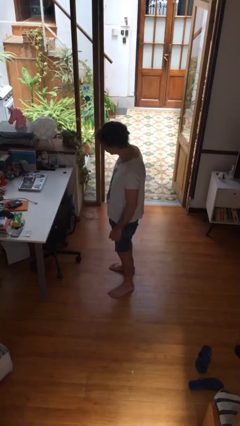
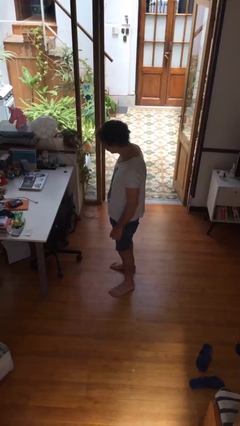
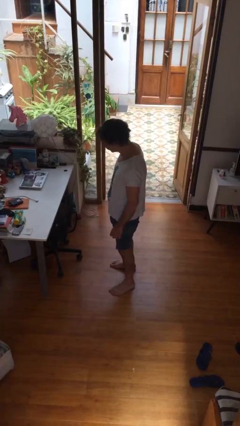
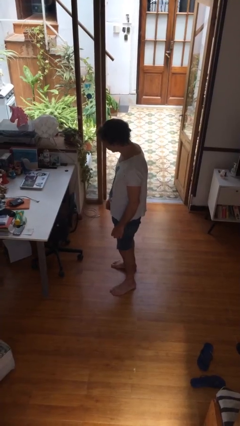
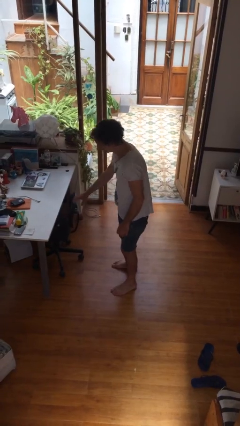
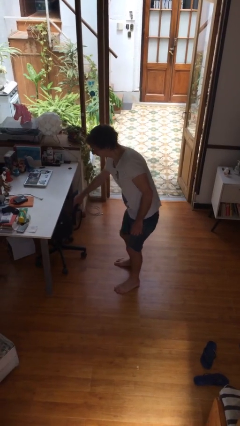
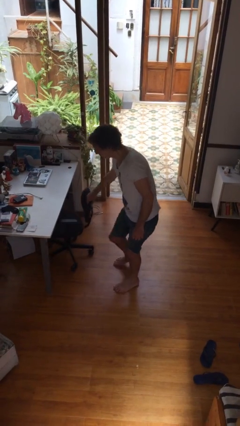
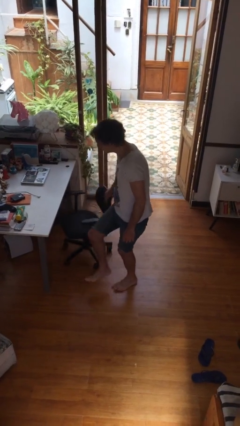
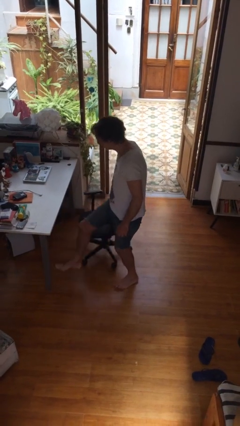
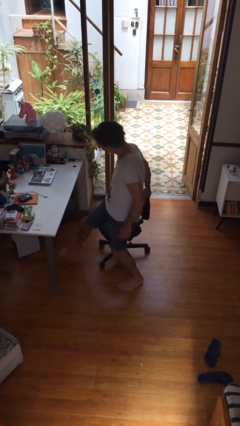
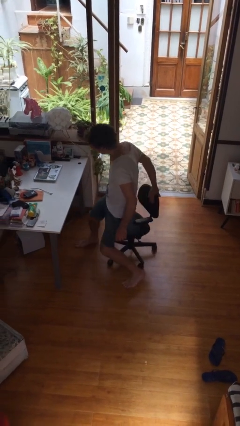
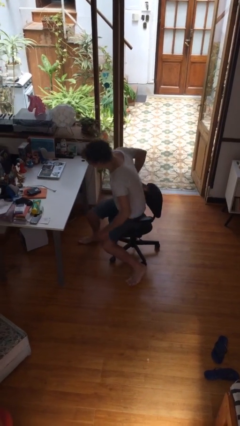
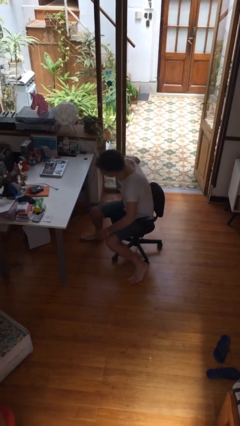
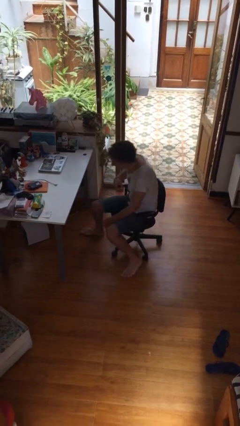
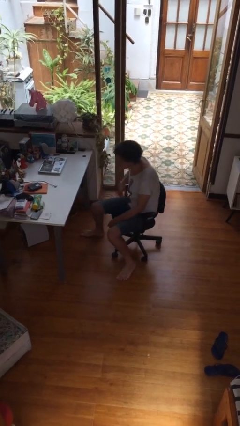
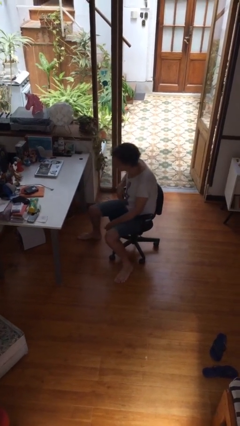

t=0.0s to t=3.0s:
person sits down

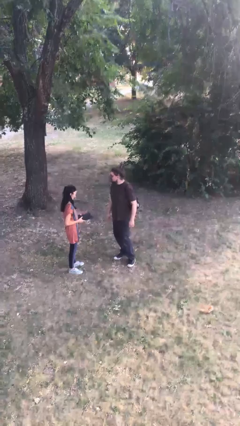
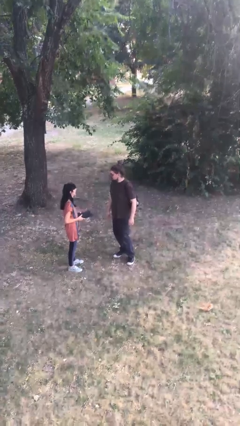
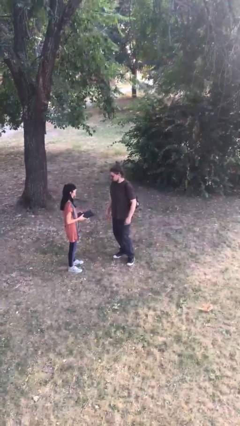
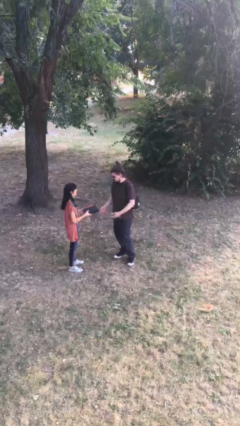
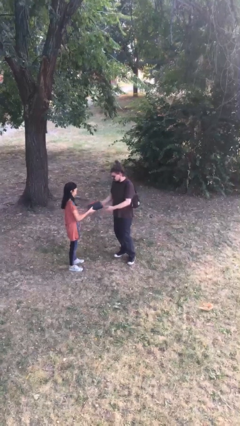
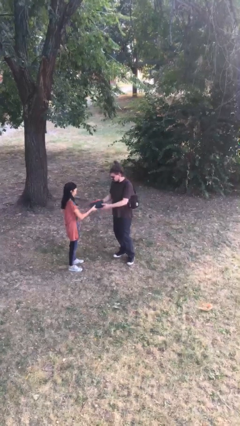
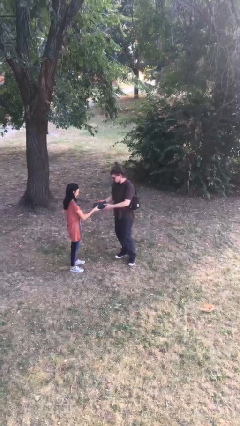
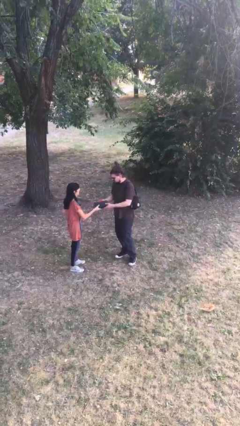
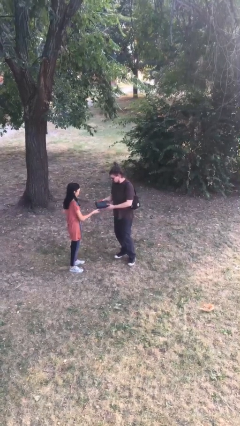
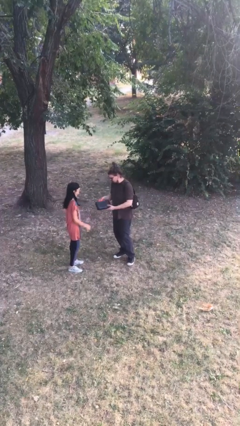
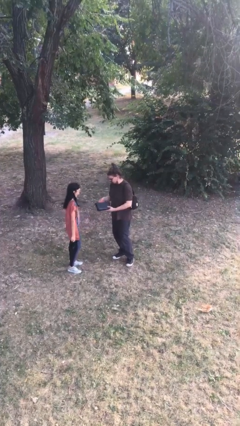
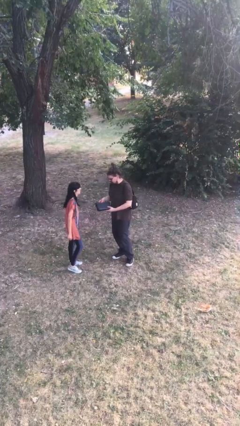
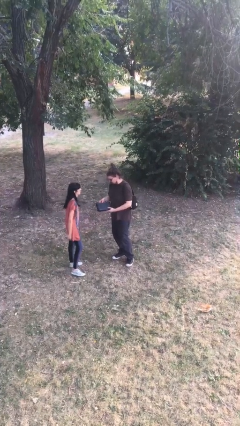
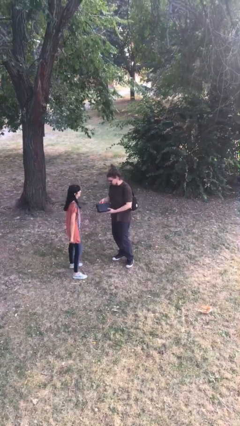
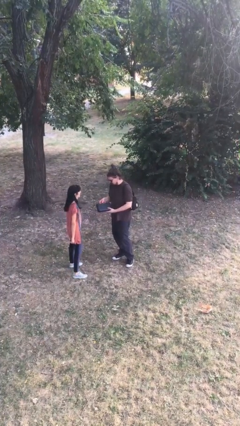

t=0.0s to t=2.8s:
person transfers object to person

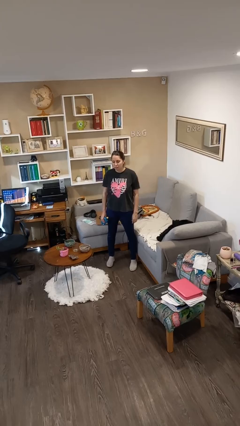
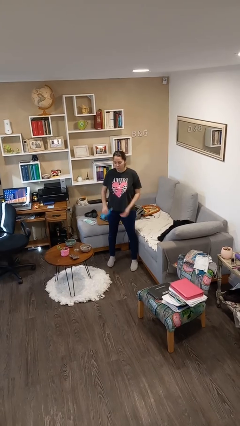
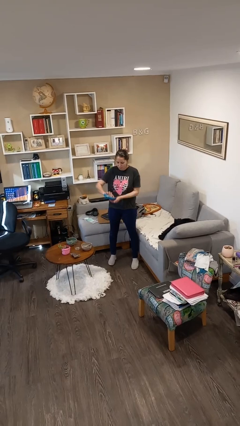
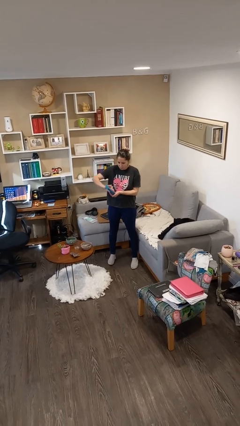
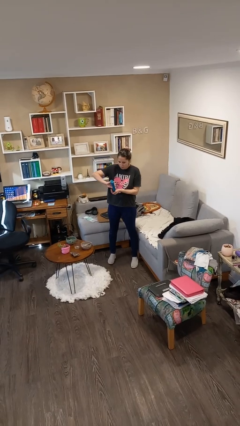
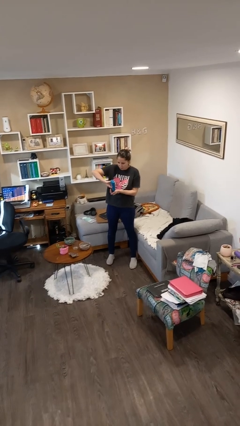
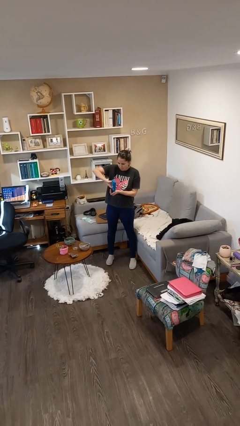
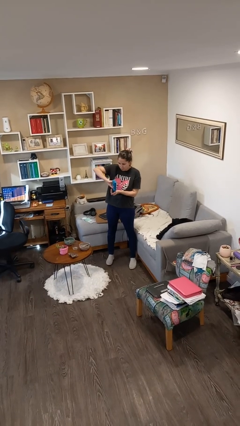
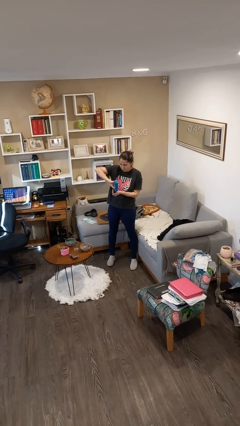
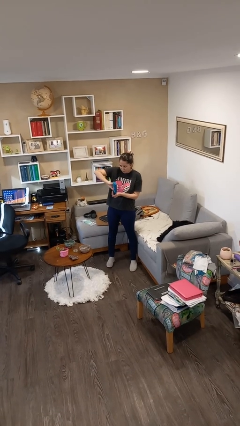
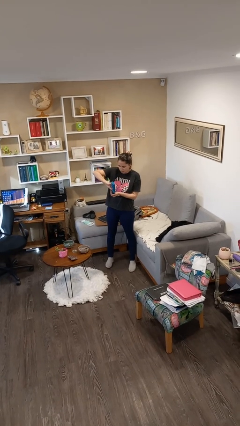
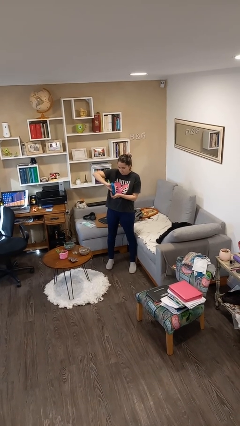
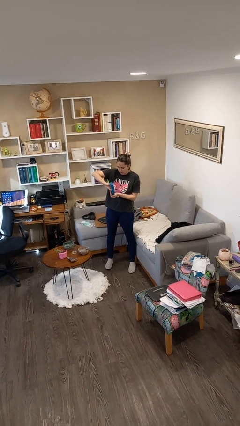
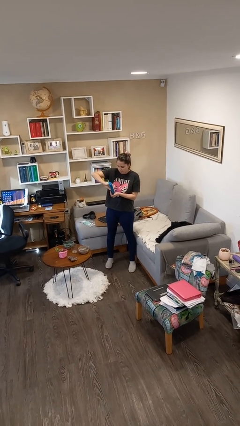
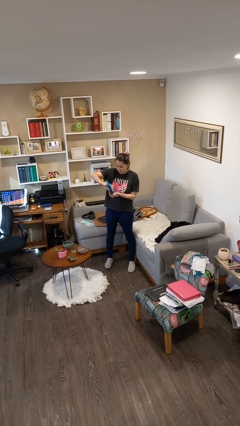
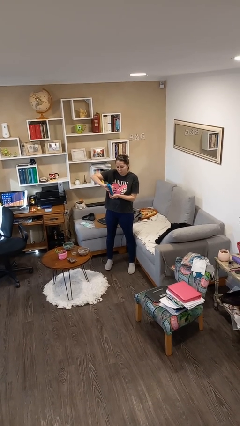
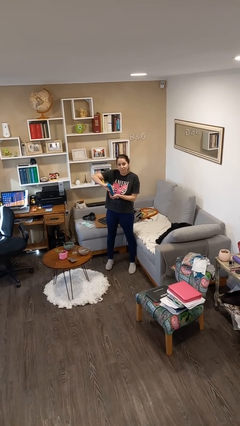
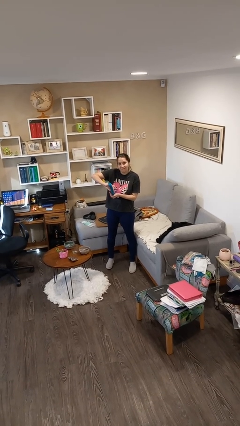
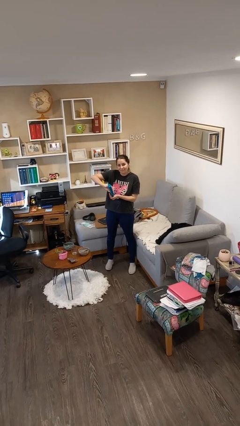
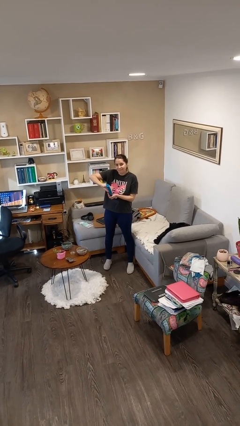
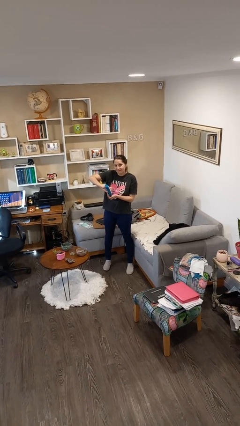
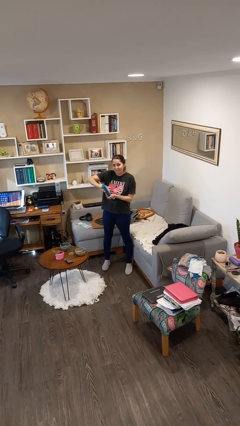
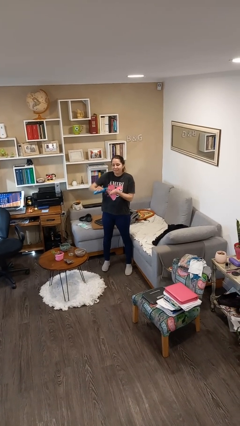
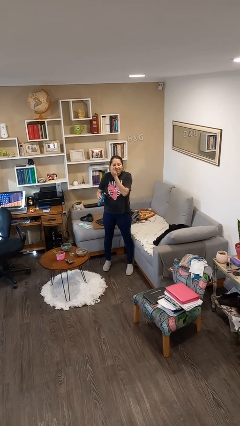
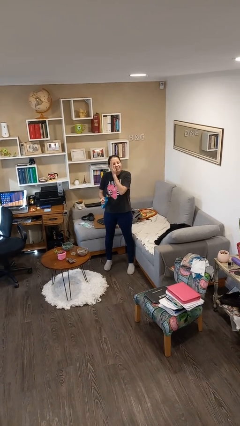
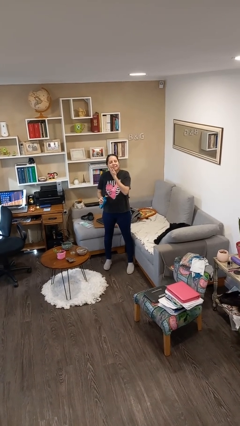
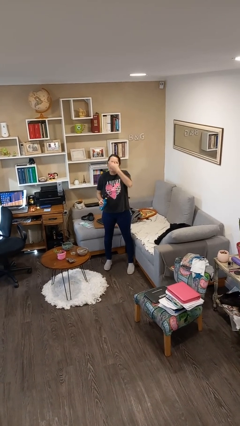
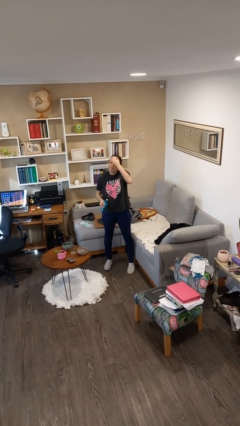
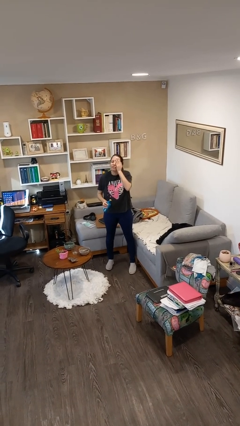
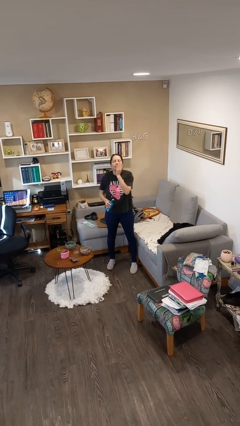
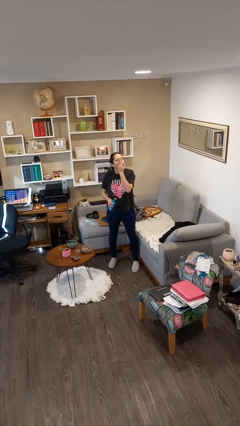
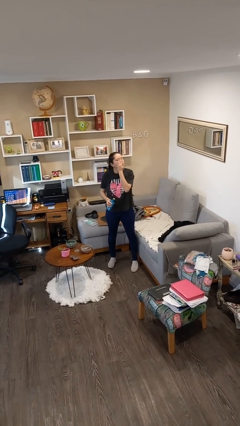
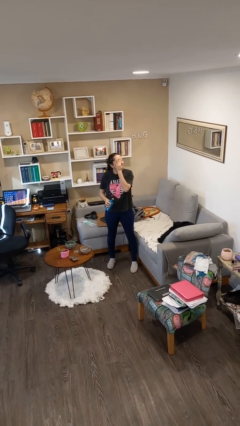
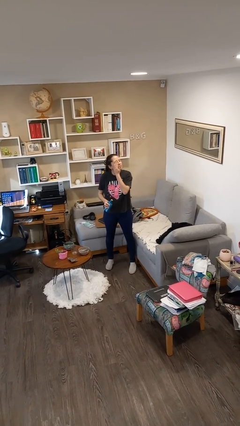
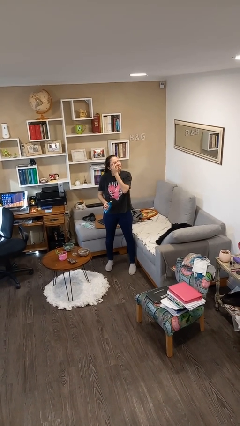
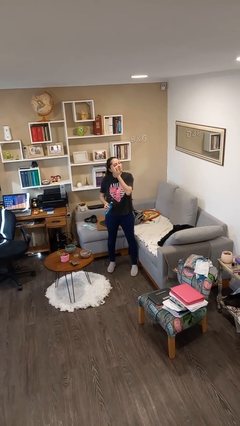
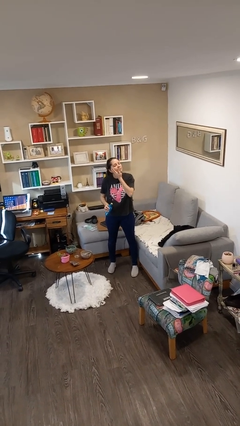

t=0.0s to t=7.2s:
person applies facial moisturizer

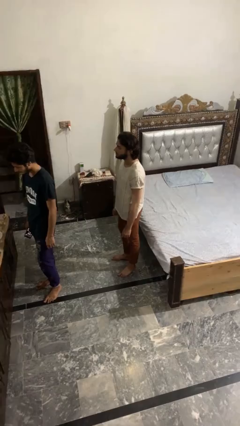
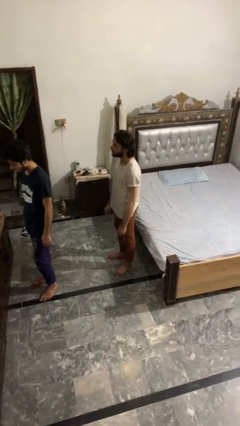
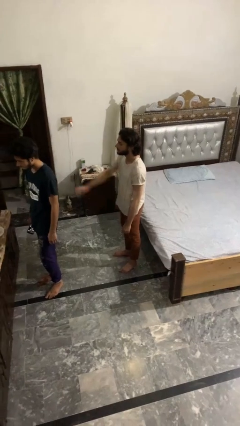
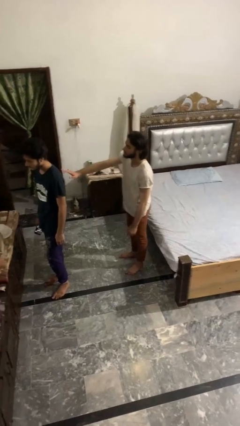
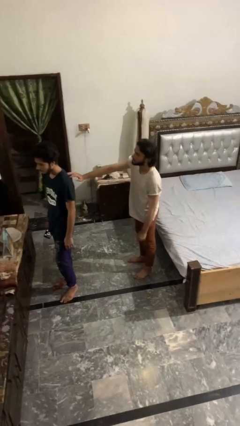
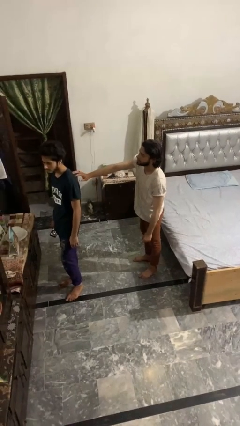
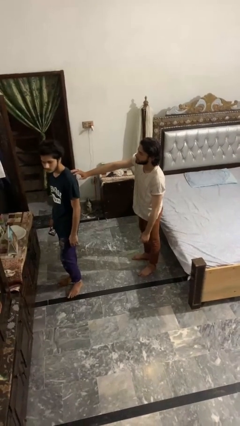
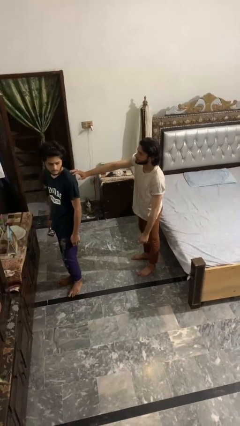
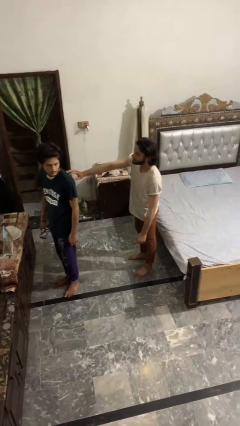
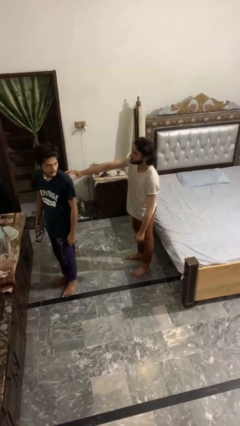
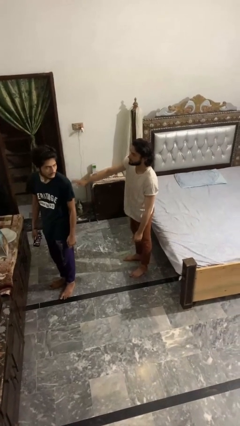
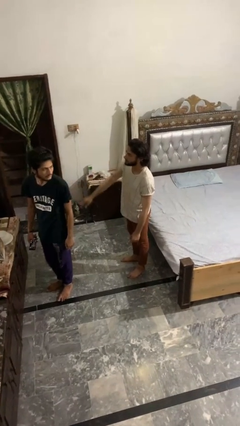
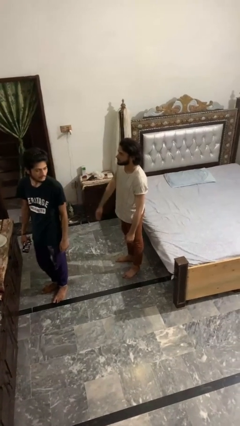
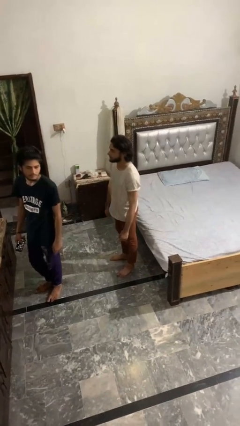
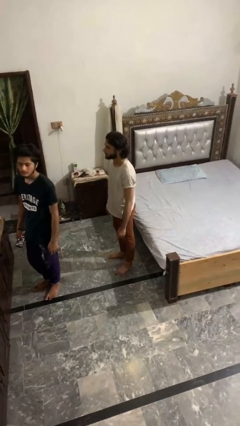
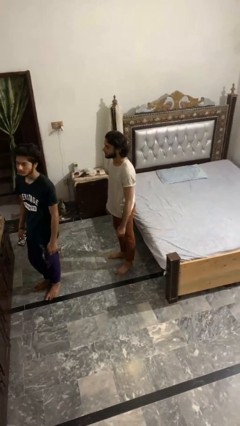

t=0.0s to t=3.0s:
person touches back of person

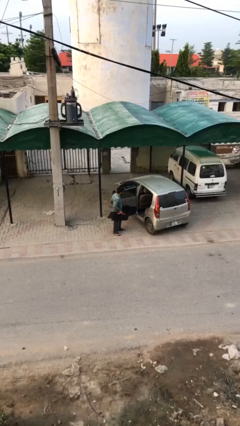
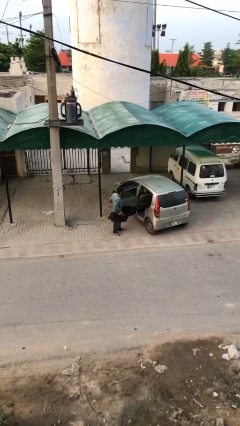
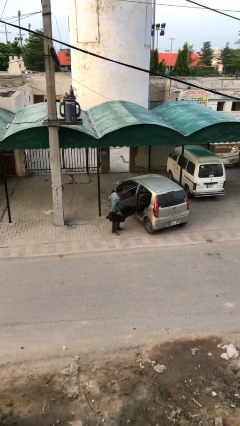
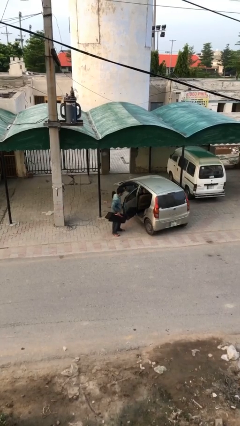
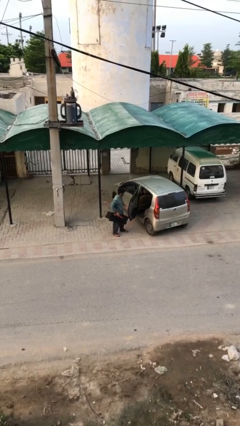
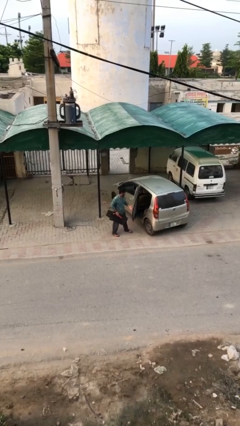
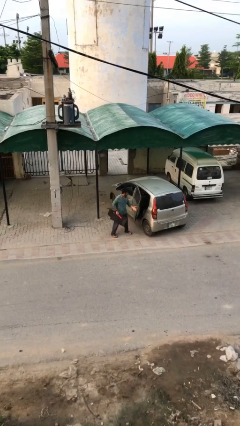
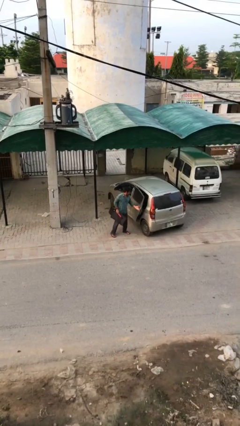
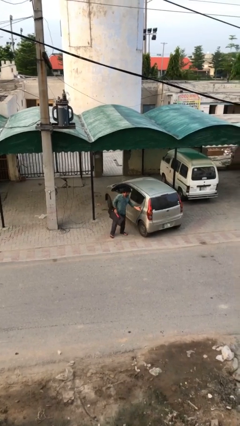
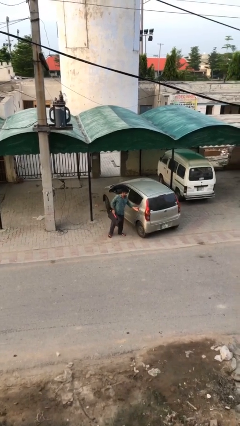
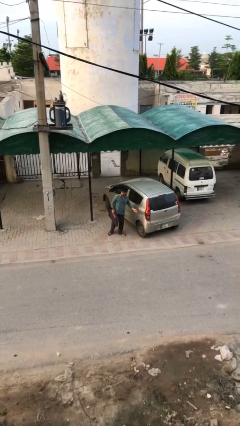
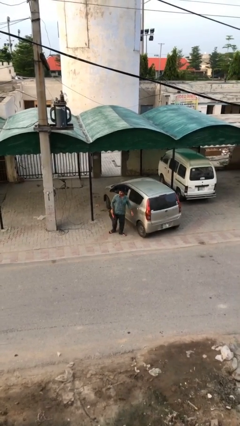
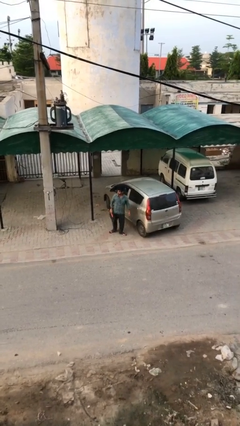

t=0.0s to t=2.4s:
person closes car door
